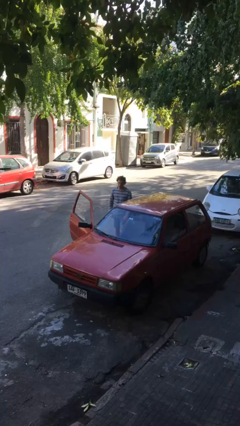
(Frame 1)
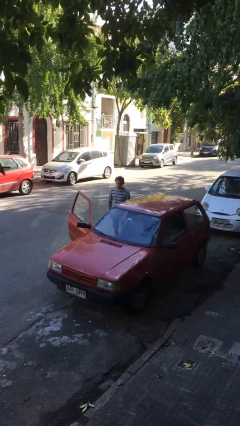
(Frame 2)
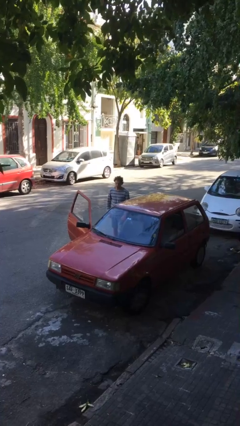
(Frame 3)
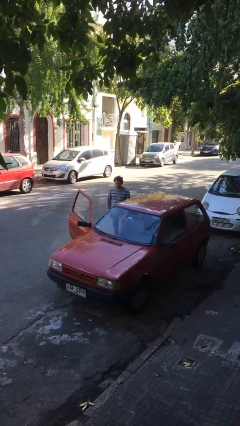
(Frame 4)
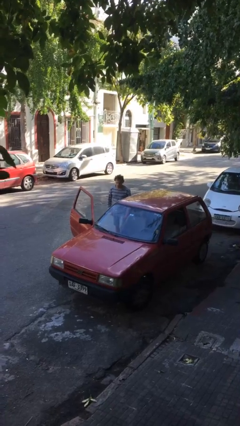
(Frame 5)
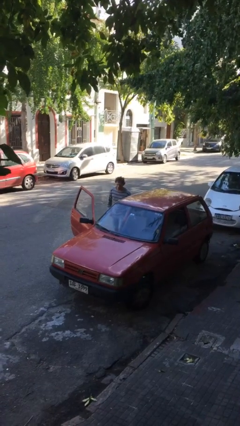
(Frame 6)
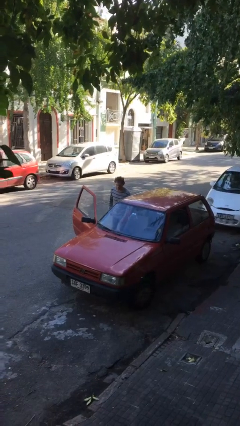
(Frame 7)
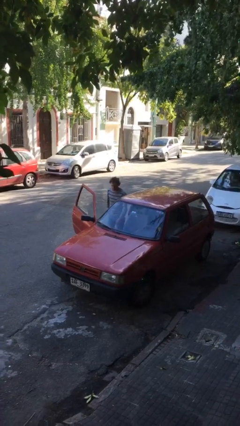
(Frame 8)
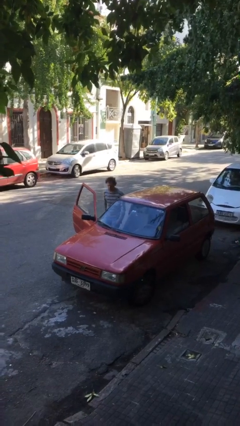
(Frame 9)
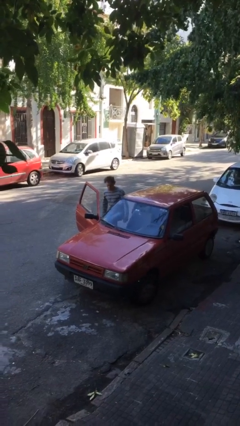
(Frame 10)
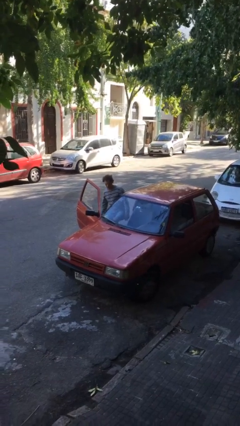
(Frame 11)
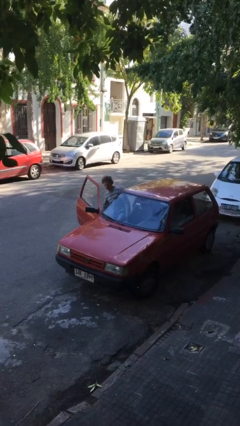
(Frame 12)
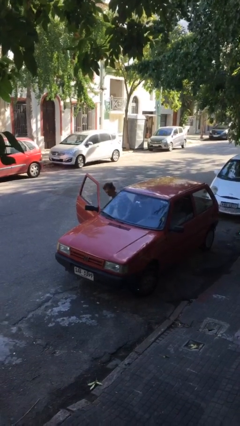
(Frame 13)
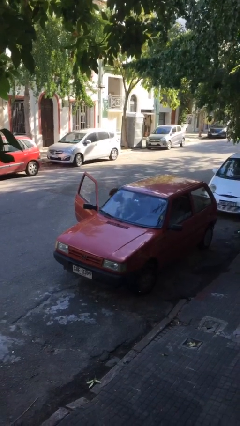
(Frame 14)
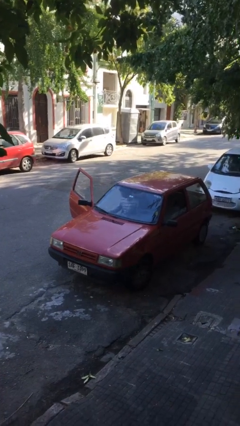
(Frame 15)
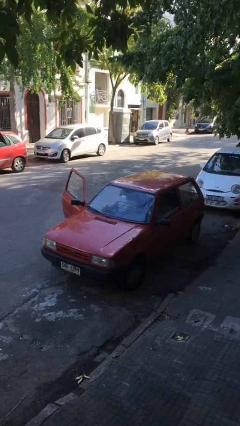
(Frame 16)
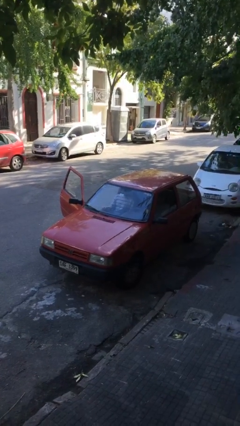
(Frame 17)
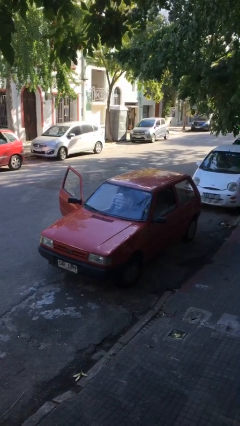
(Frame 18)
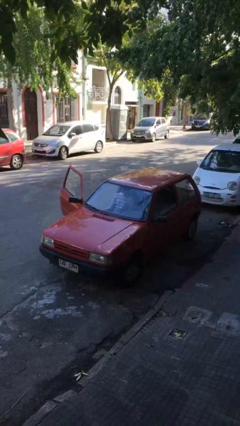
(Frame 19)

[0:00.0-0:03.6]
person enters car

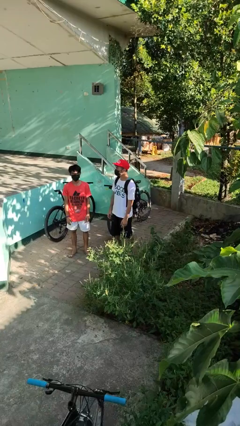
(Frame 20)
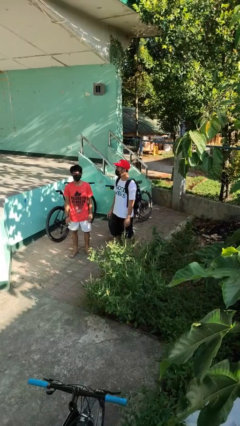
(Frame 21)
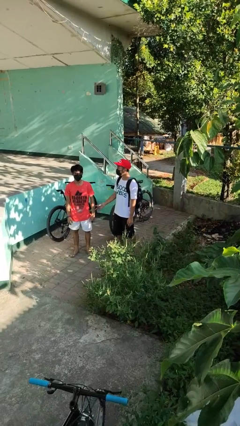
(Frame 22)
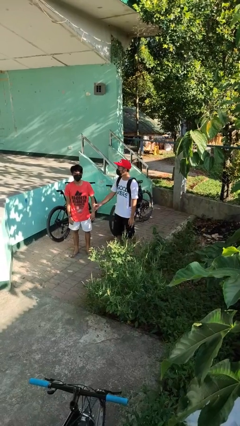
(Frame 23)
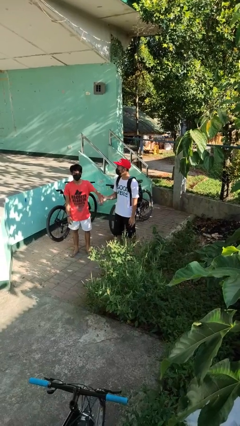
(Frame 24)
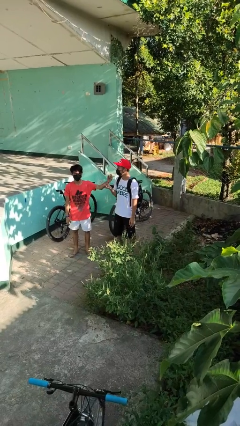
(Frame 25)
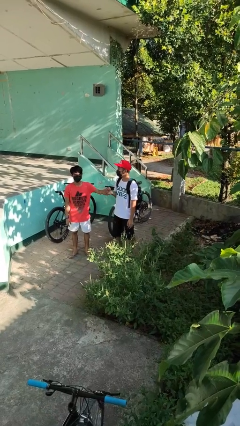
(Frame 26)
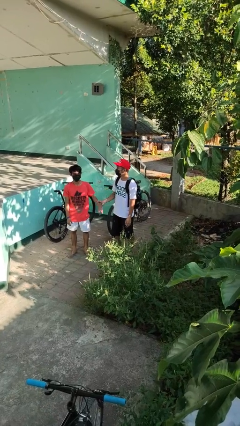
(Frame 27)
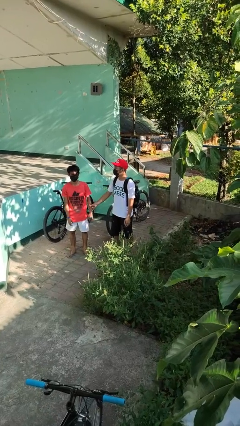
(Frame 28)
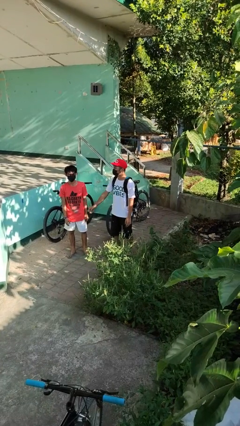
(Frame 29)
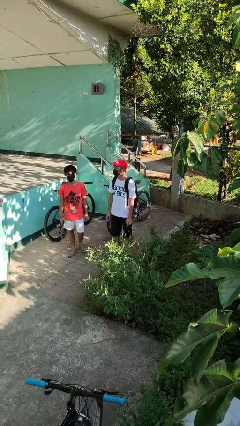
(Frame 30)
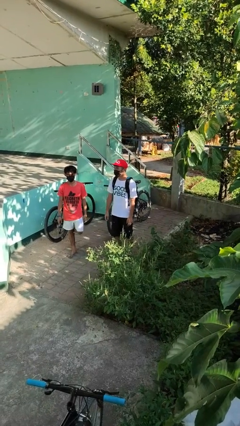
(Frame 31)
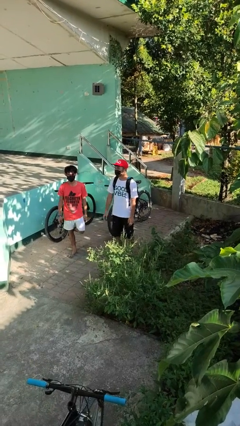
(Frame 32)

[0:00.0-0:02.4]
person grabs person by forearm

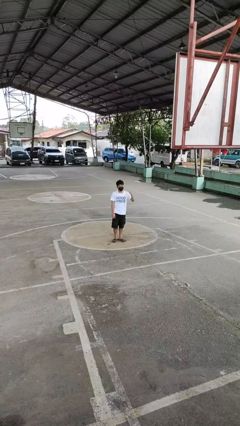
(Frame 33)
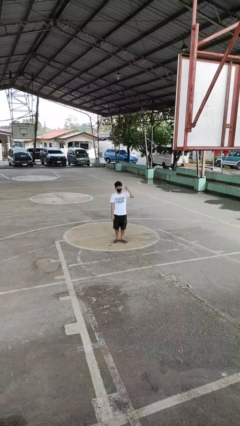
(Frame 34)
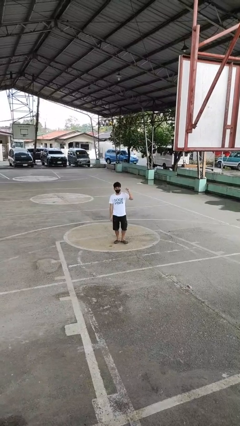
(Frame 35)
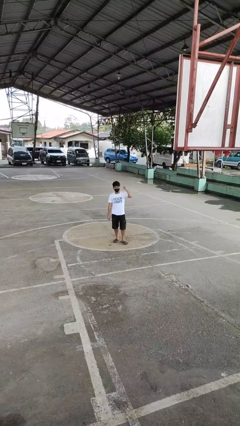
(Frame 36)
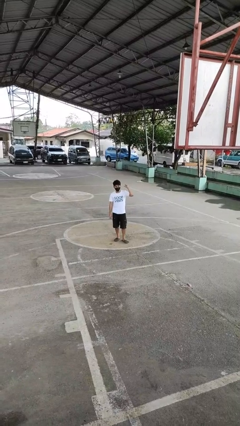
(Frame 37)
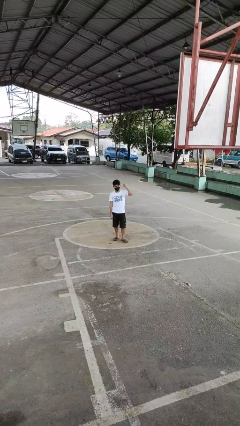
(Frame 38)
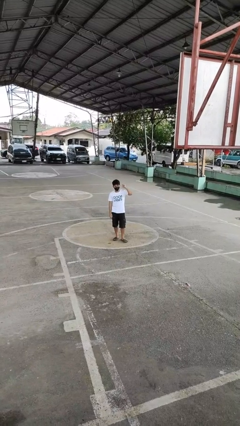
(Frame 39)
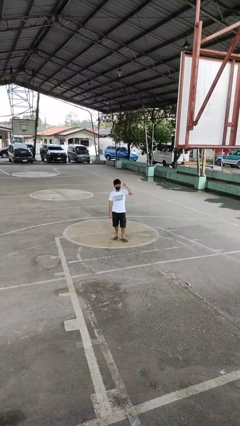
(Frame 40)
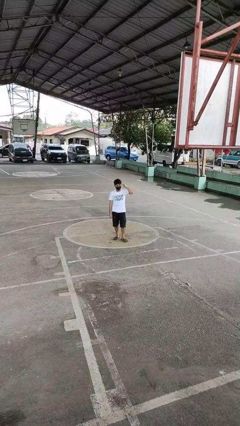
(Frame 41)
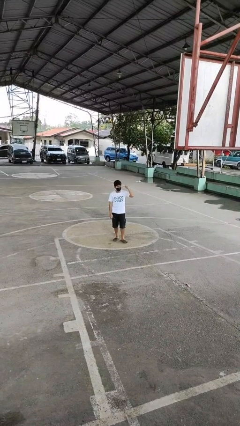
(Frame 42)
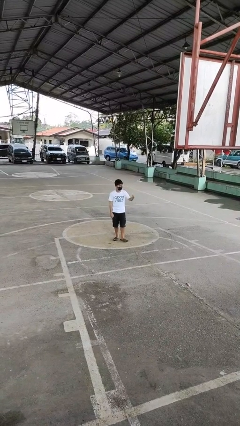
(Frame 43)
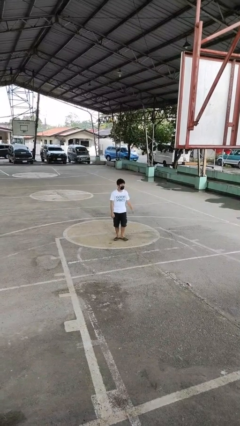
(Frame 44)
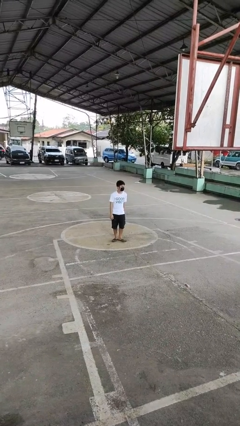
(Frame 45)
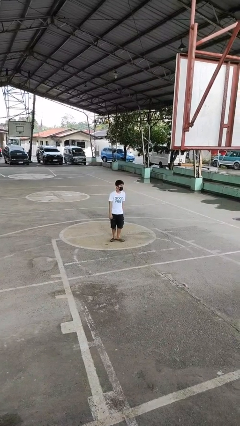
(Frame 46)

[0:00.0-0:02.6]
person gestures behind me

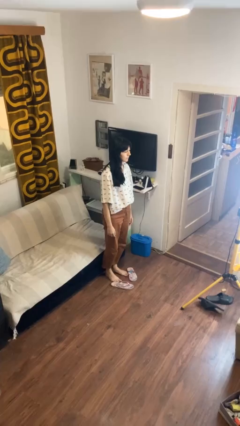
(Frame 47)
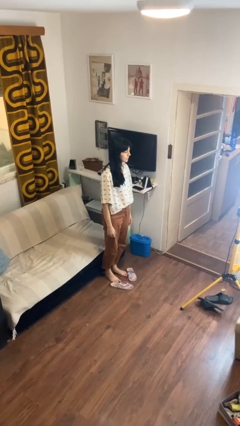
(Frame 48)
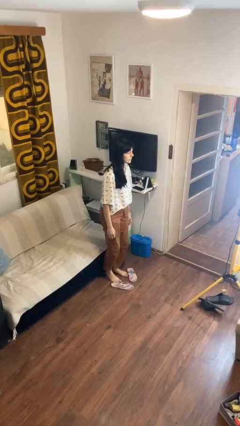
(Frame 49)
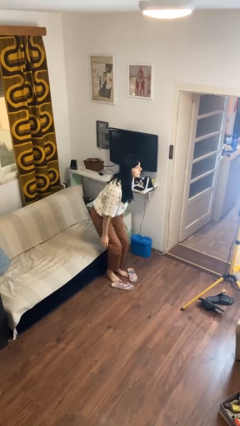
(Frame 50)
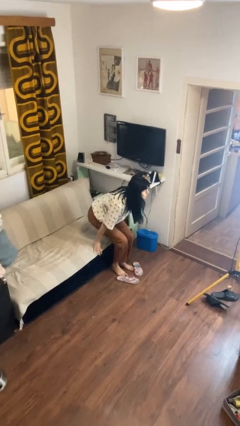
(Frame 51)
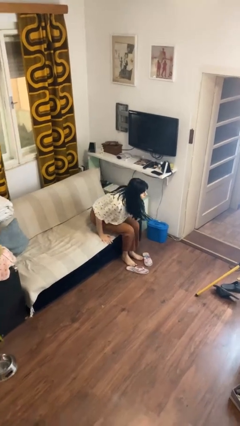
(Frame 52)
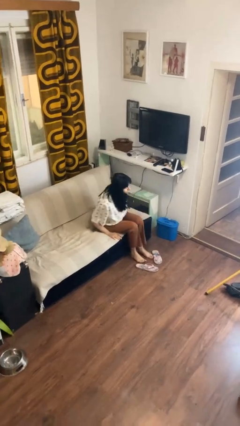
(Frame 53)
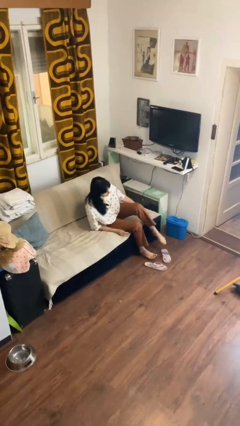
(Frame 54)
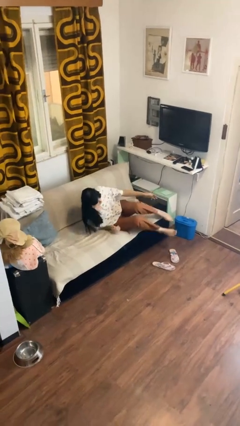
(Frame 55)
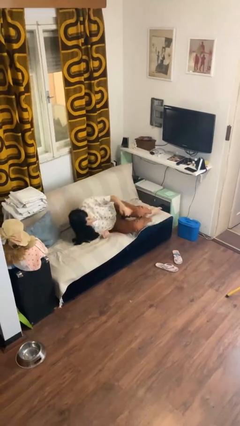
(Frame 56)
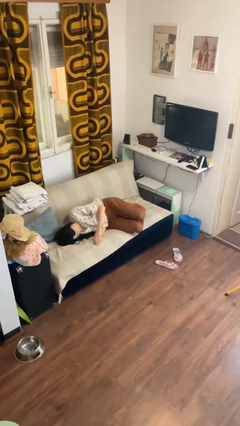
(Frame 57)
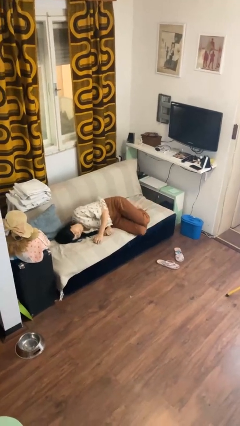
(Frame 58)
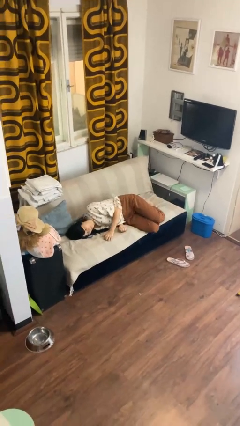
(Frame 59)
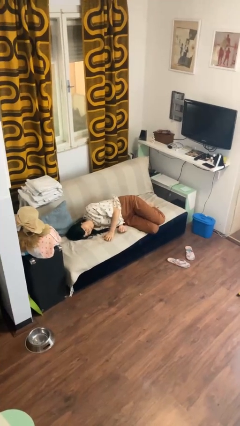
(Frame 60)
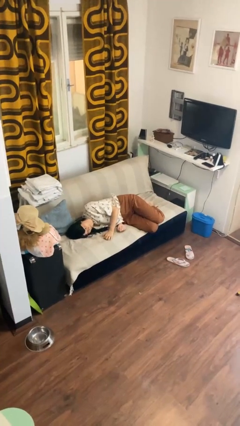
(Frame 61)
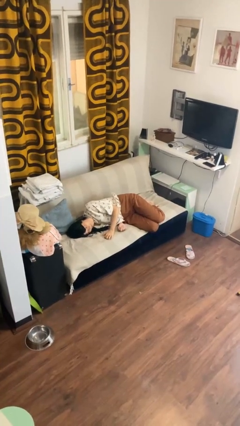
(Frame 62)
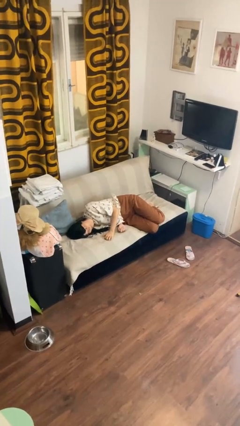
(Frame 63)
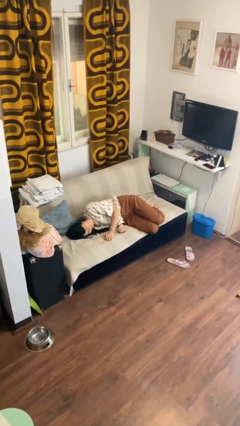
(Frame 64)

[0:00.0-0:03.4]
person lies down on couch

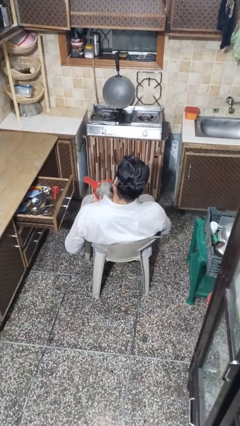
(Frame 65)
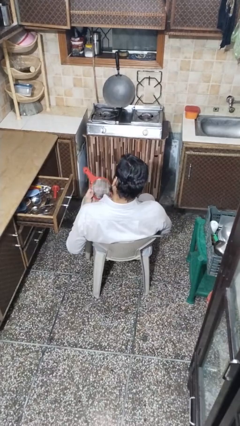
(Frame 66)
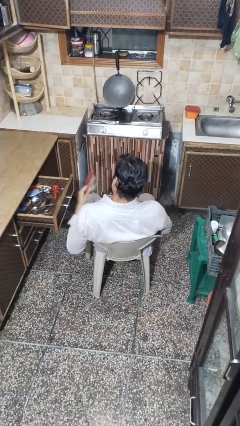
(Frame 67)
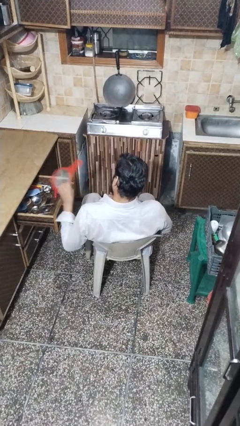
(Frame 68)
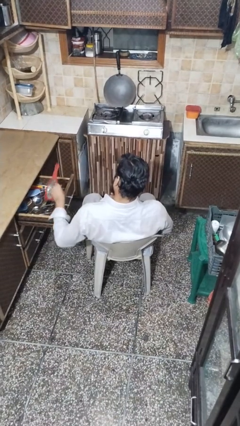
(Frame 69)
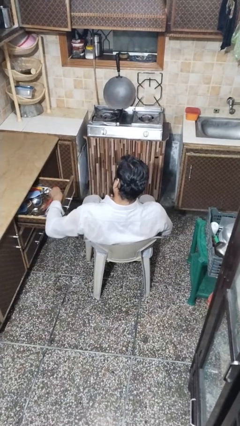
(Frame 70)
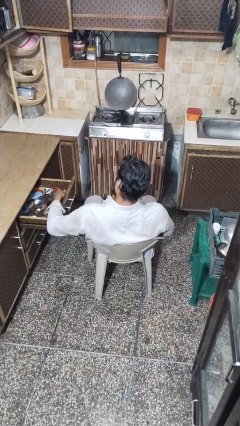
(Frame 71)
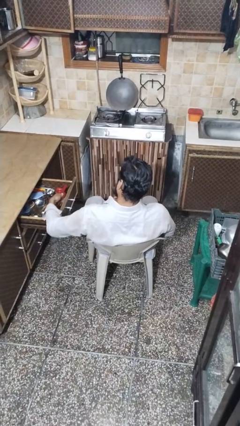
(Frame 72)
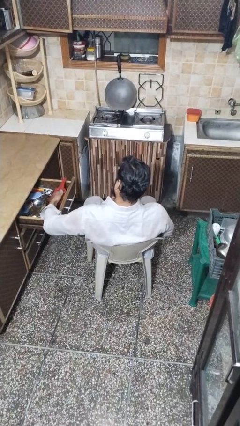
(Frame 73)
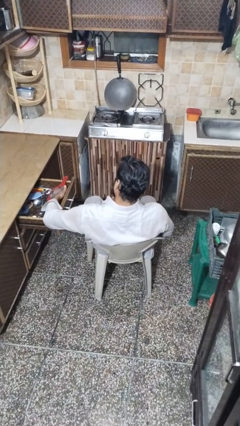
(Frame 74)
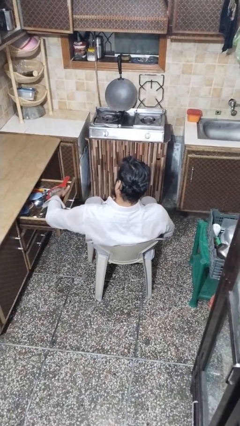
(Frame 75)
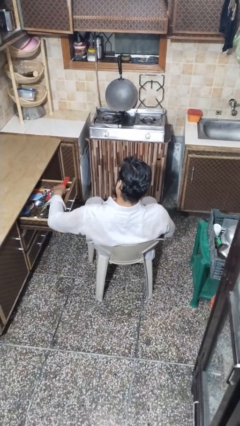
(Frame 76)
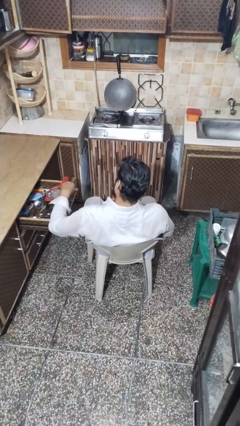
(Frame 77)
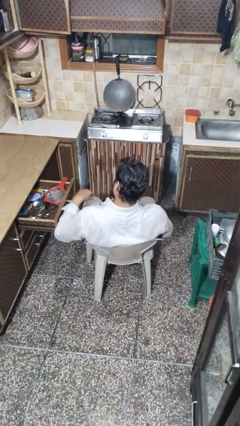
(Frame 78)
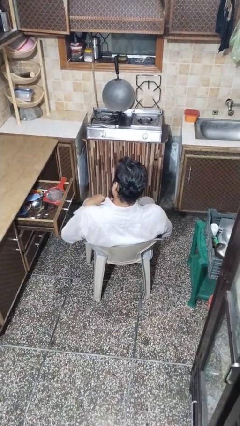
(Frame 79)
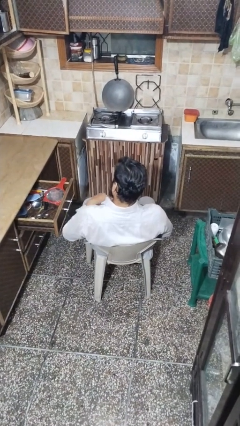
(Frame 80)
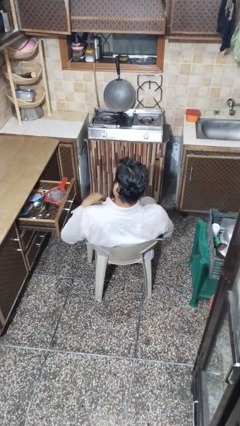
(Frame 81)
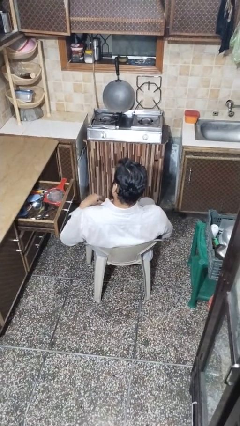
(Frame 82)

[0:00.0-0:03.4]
person puts object into kitchen drawer

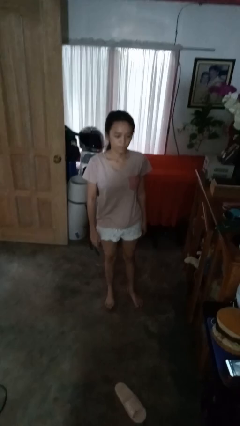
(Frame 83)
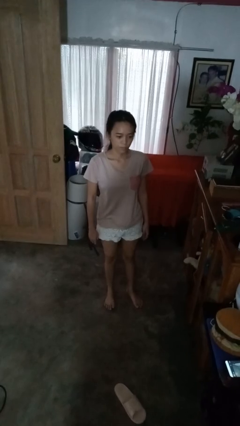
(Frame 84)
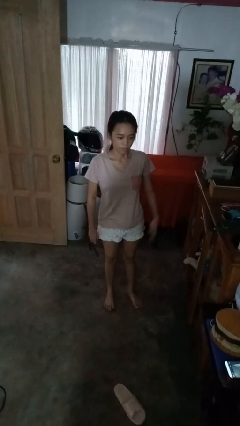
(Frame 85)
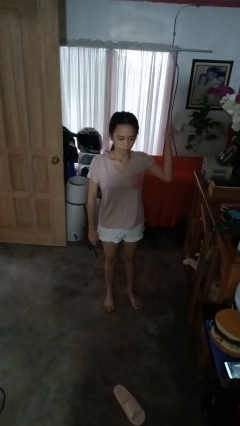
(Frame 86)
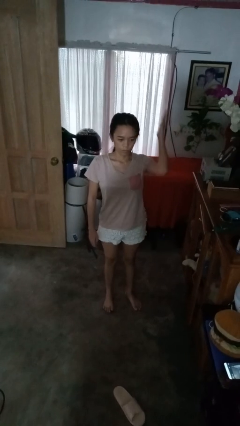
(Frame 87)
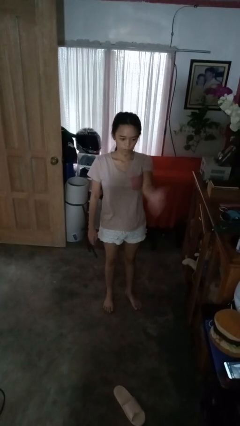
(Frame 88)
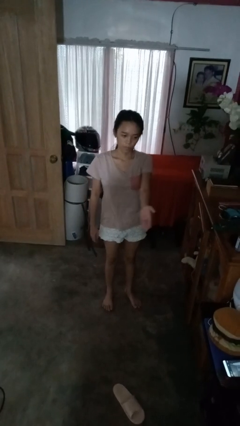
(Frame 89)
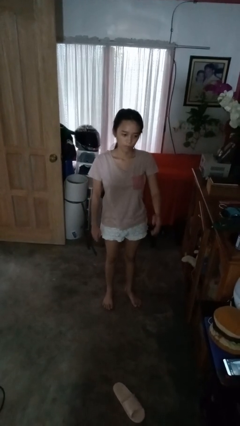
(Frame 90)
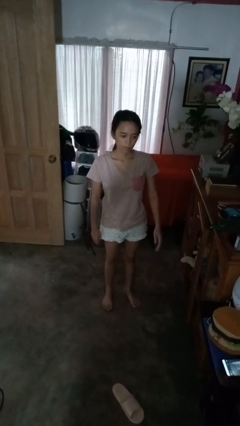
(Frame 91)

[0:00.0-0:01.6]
person karate chop

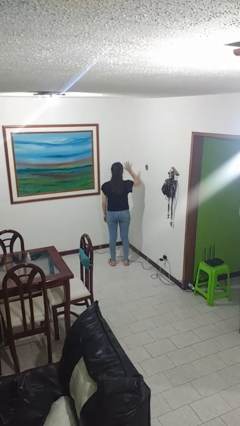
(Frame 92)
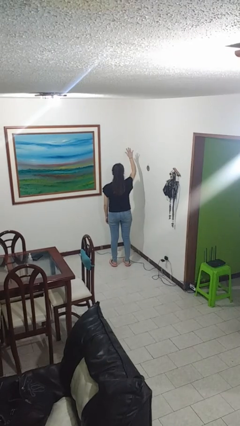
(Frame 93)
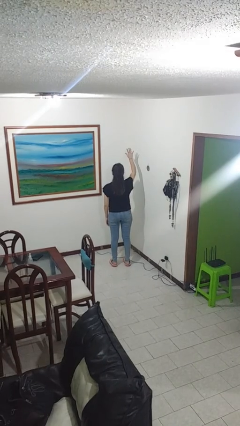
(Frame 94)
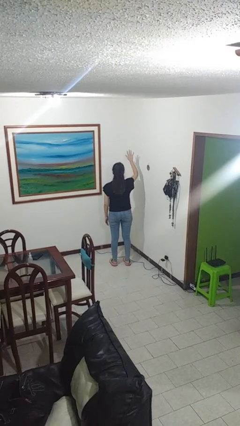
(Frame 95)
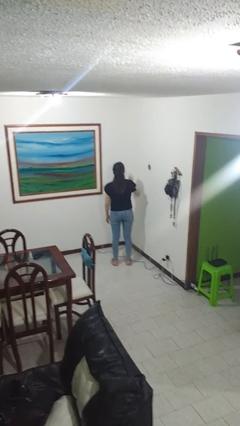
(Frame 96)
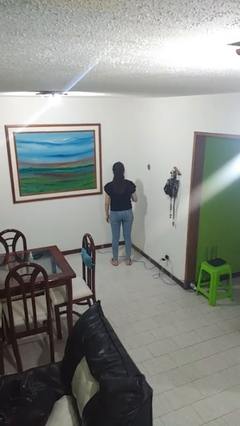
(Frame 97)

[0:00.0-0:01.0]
person gestures number five
